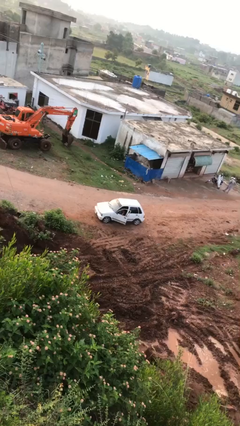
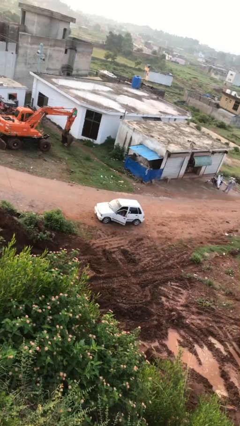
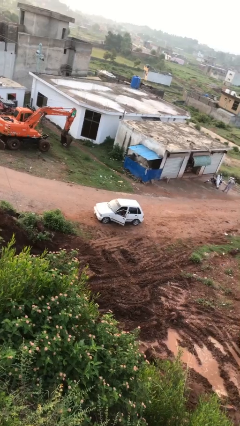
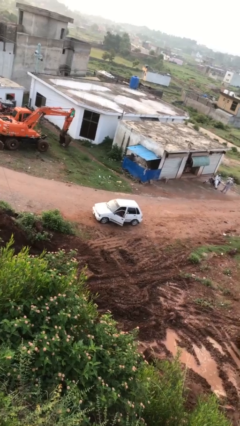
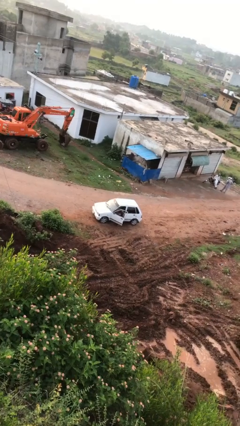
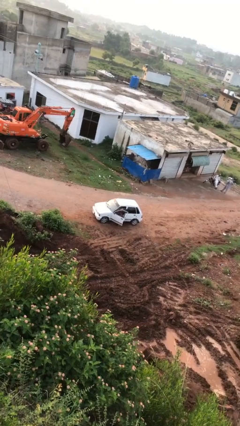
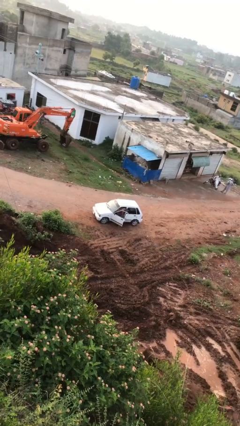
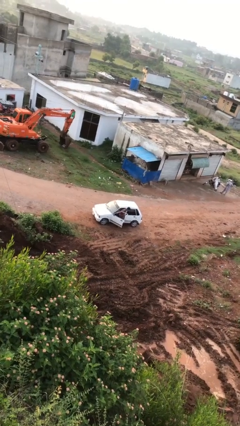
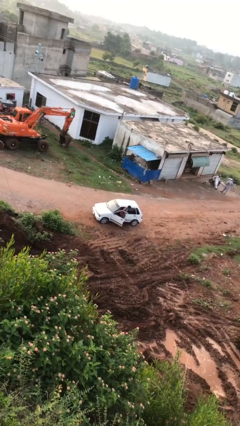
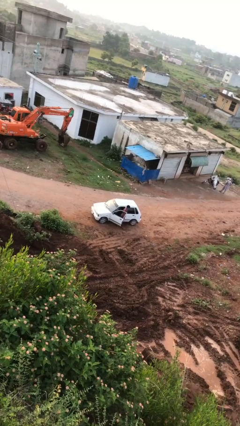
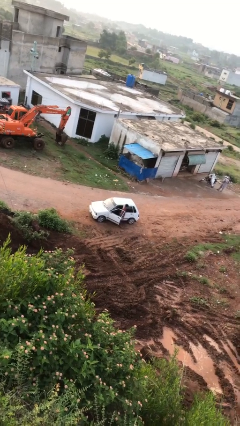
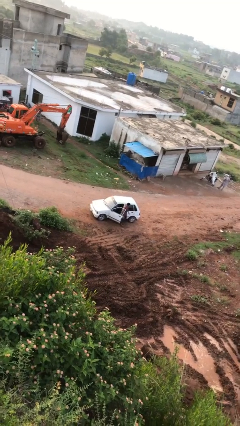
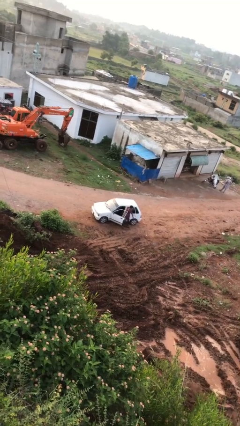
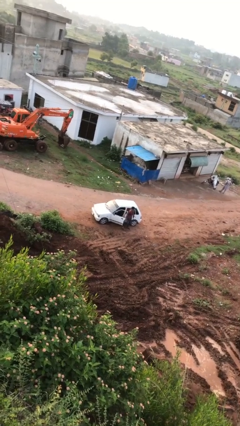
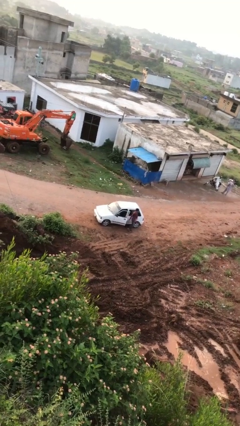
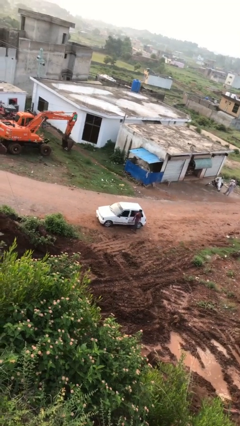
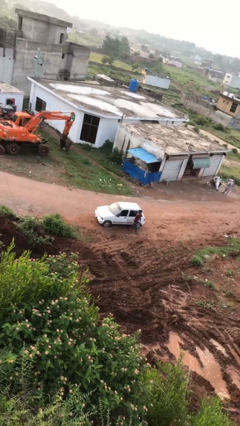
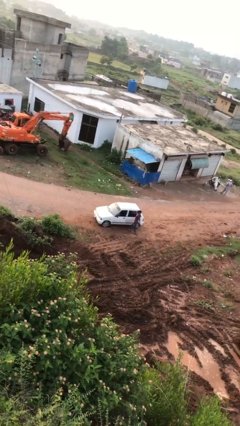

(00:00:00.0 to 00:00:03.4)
car drops off person

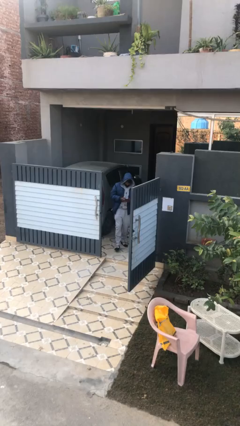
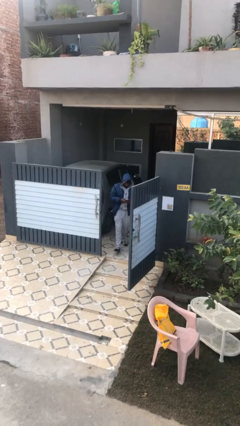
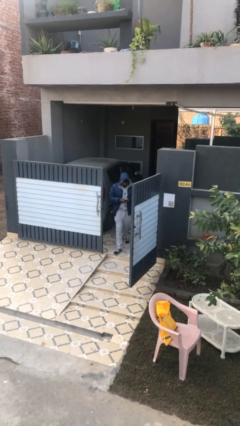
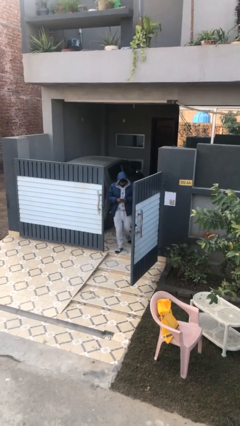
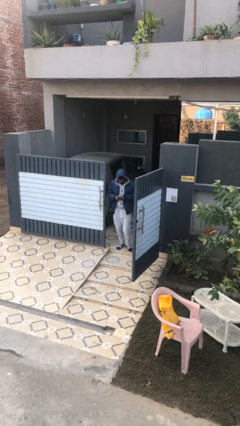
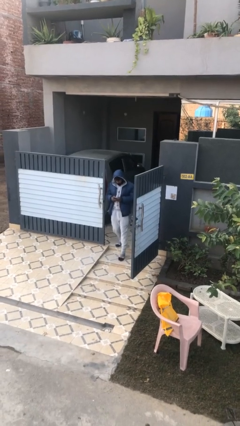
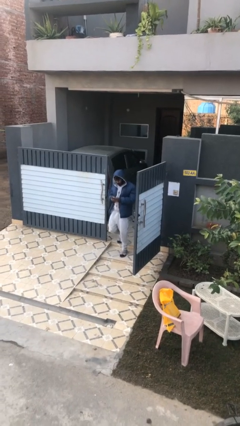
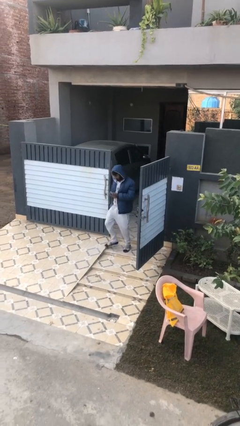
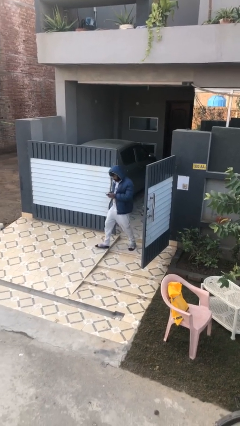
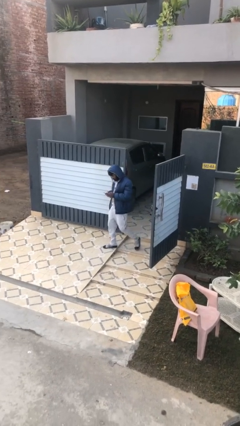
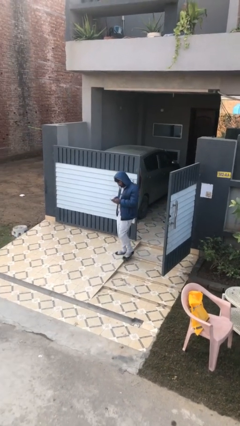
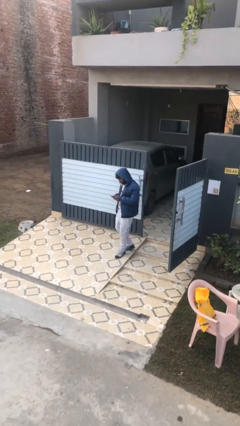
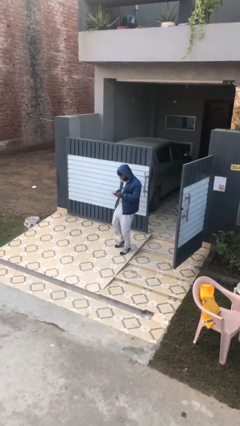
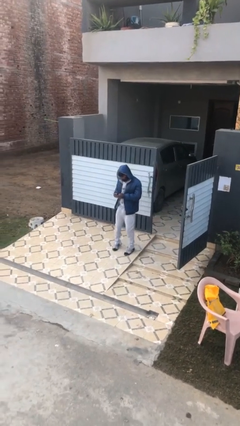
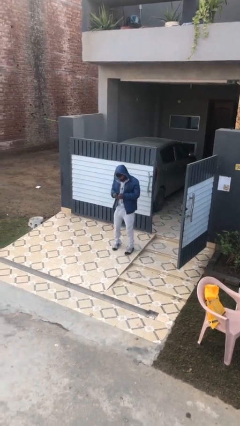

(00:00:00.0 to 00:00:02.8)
person enters scene through structure

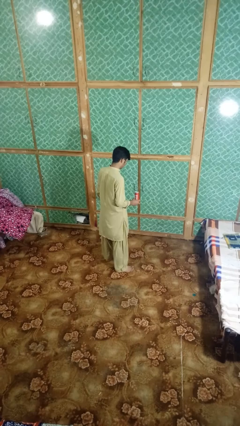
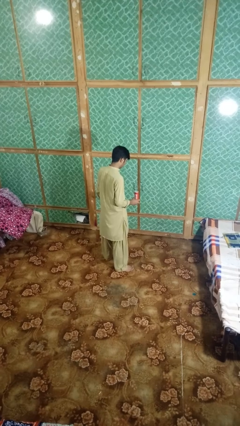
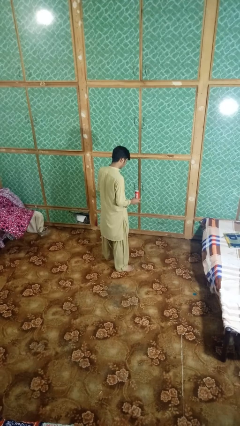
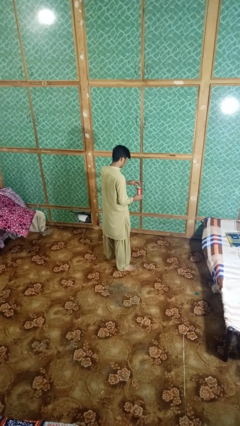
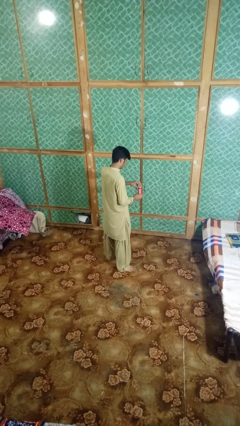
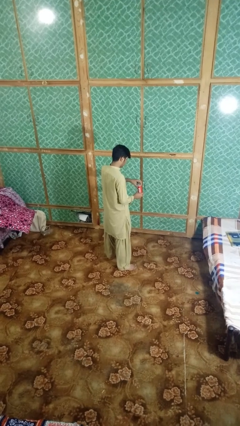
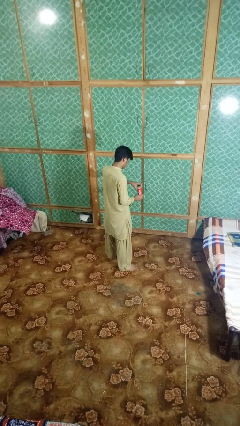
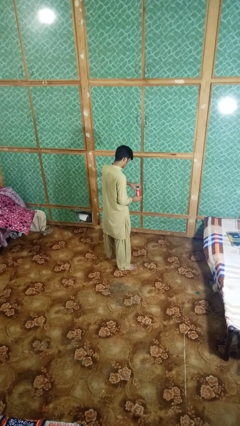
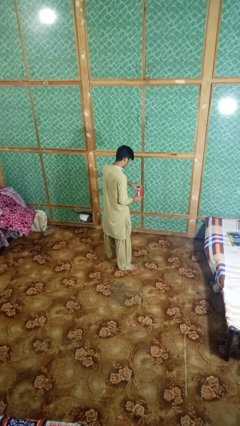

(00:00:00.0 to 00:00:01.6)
person opens can with can opener

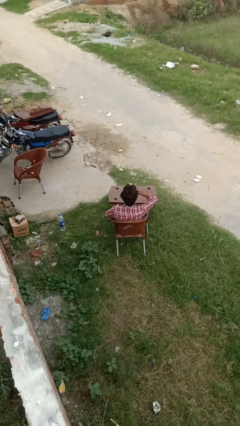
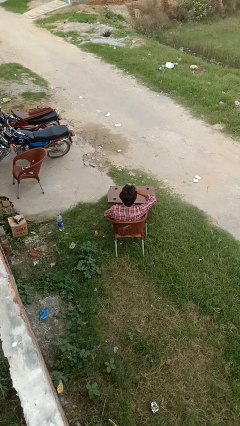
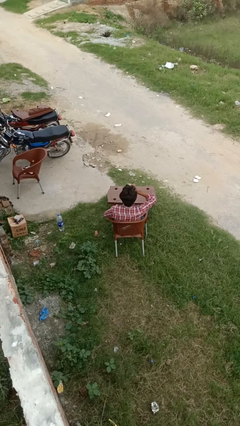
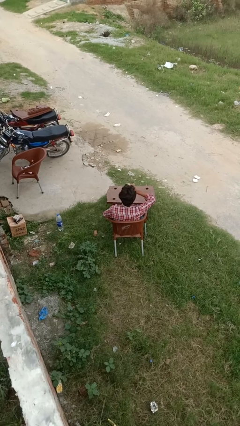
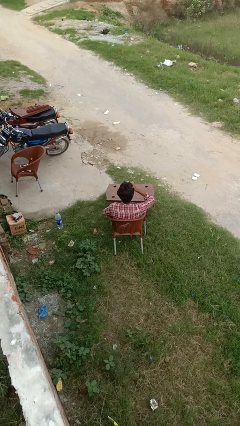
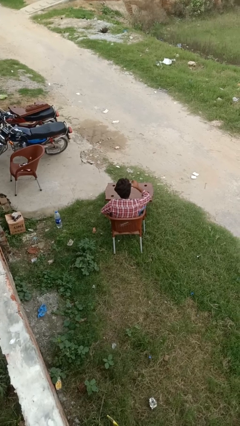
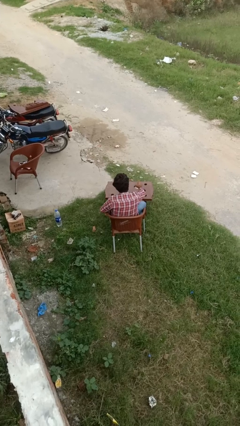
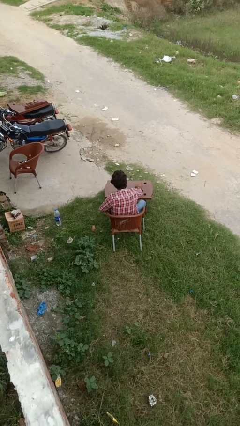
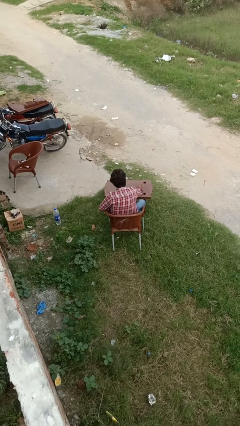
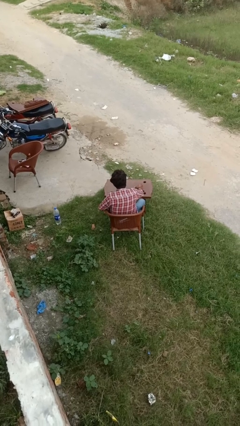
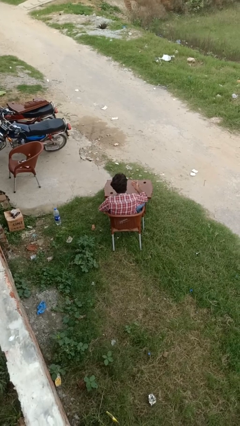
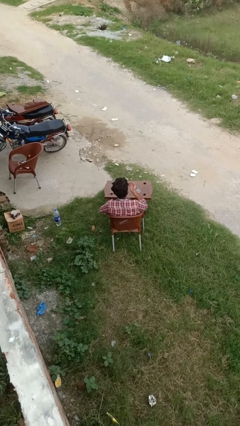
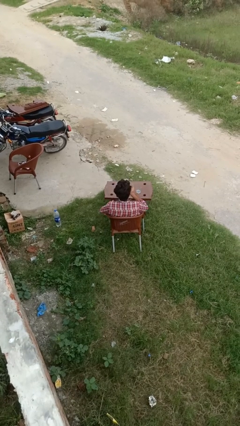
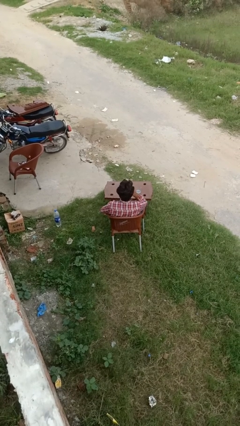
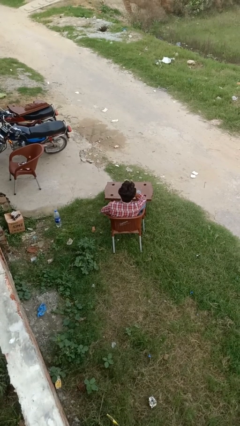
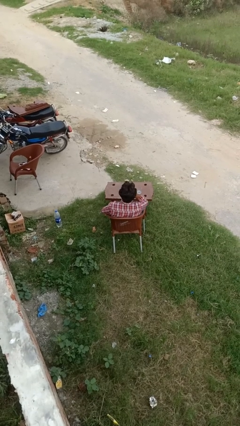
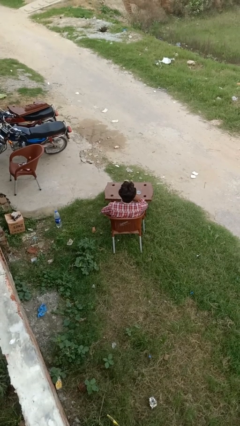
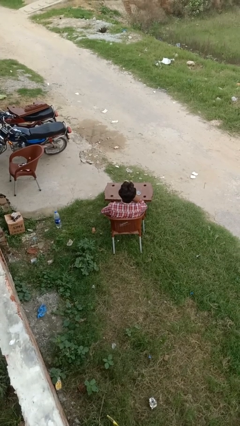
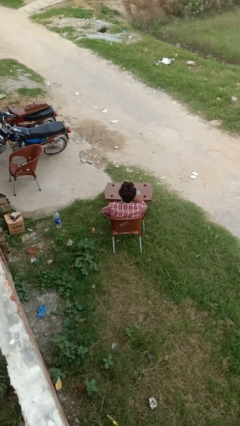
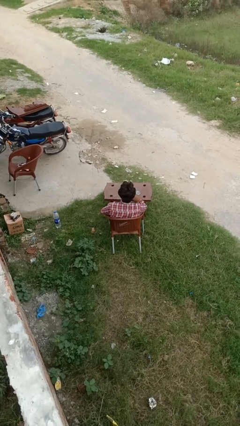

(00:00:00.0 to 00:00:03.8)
person takes medicine pills

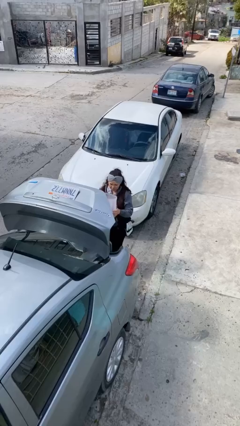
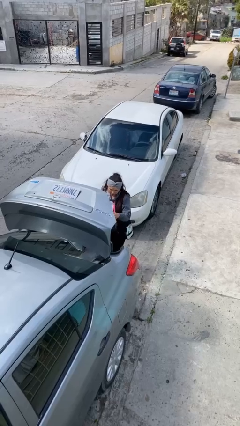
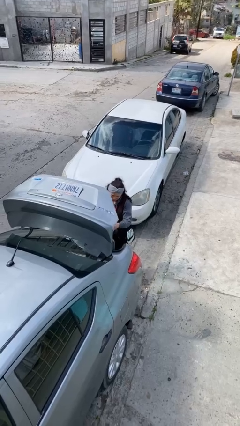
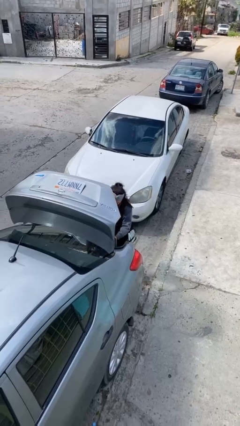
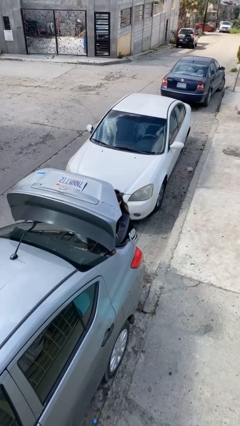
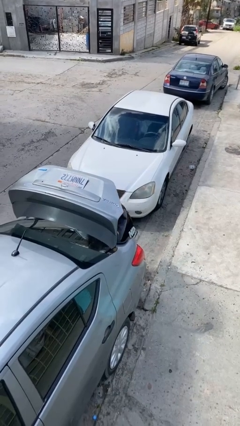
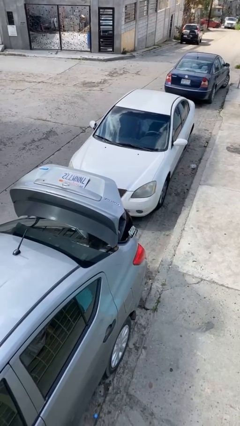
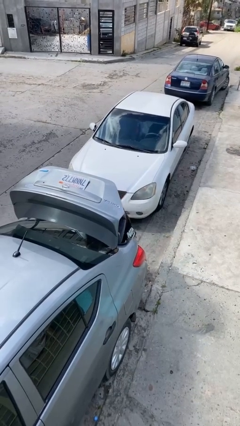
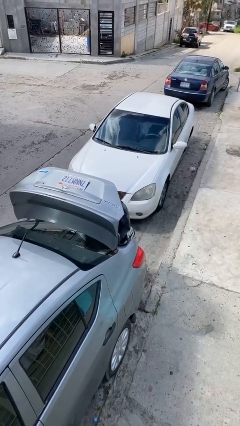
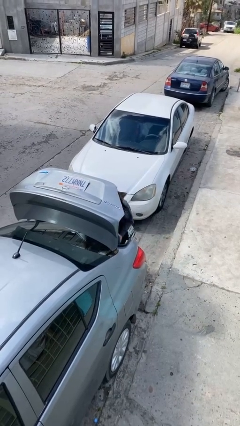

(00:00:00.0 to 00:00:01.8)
person loads car

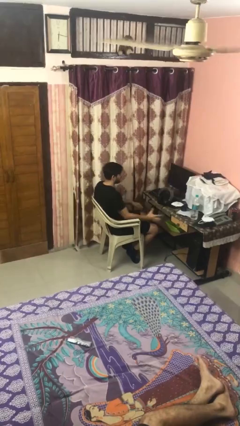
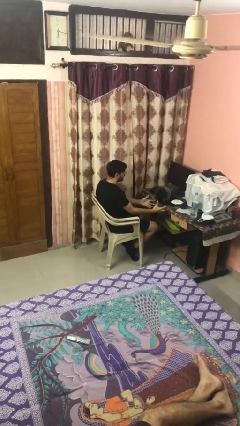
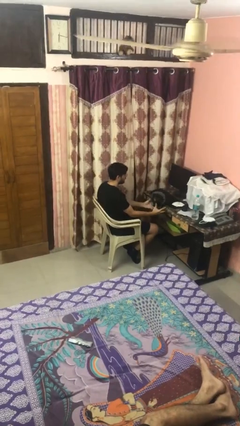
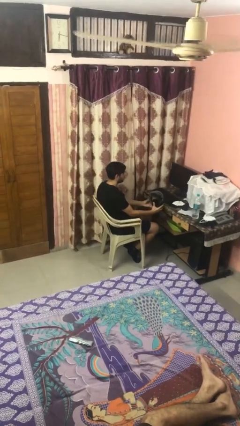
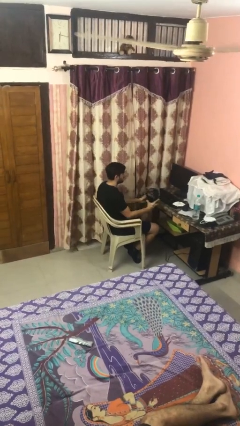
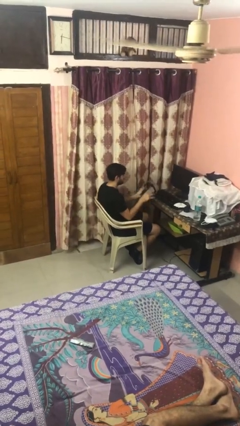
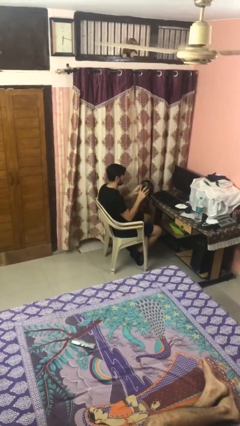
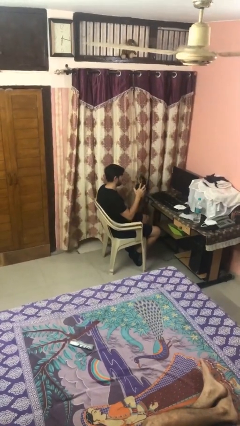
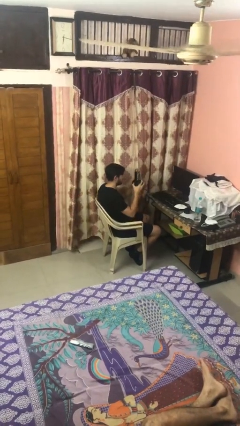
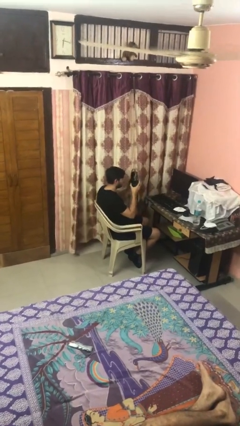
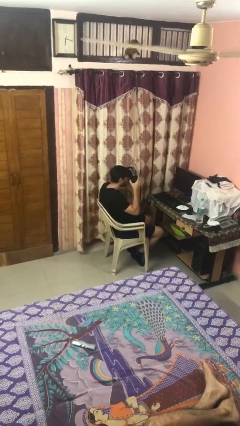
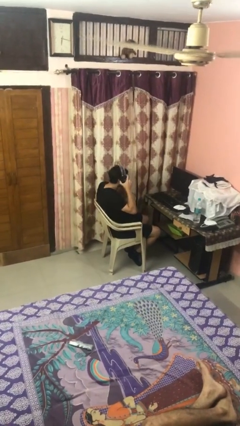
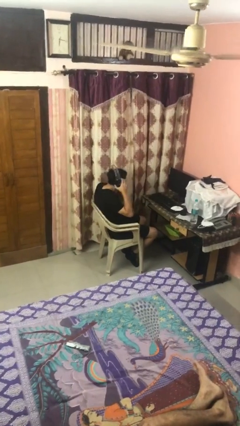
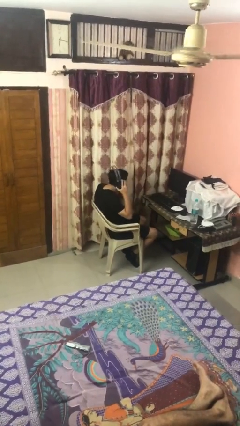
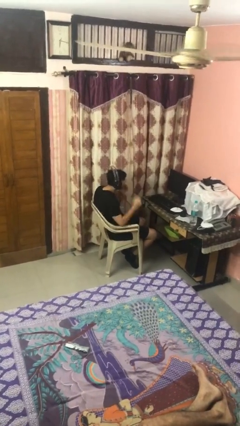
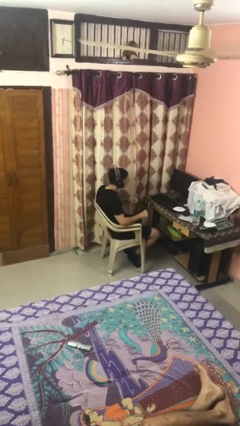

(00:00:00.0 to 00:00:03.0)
person puts on headphones

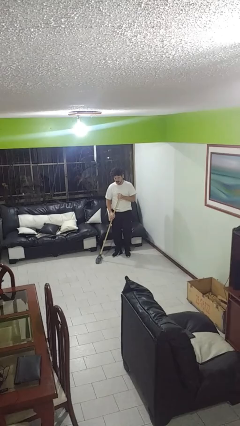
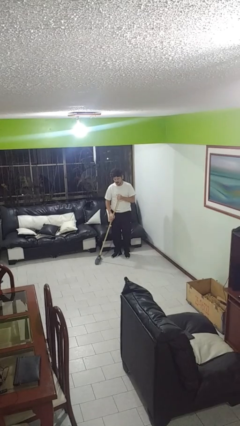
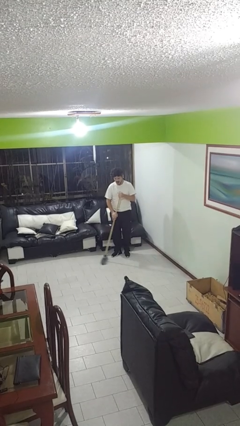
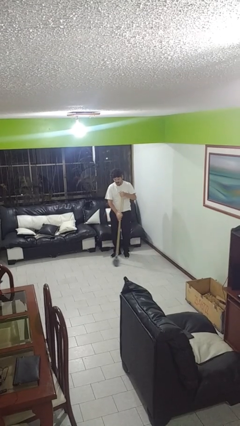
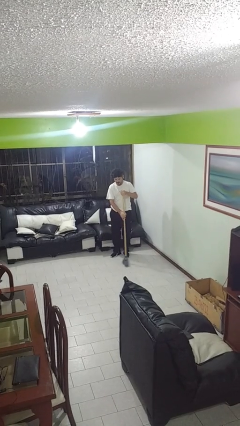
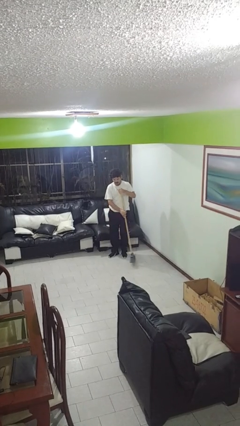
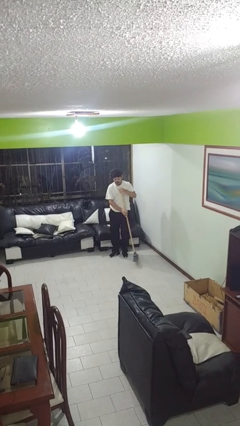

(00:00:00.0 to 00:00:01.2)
person sweeps floor
